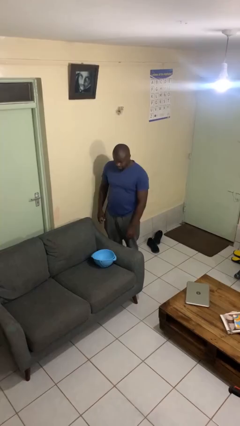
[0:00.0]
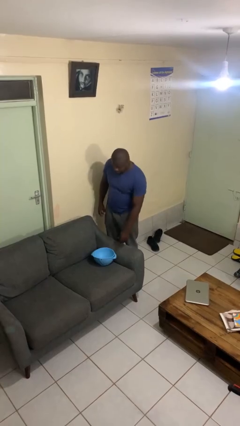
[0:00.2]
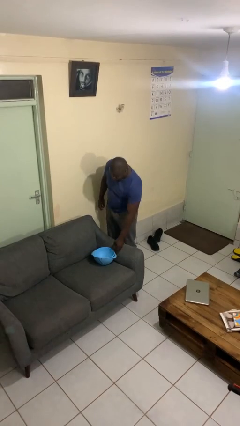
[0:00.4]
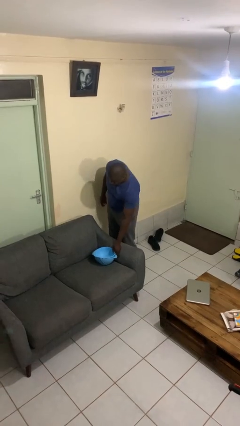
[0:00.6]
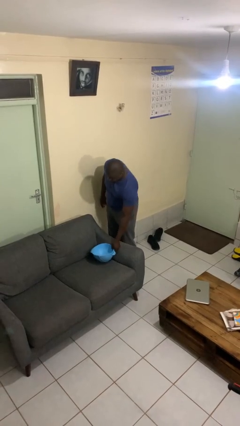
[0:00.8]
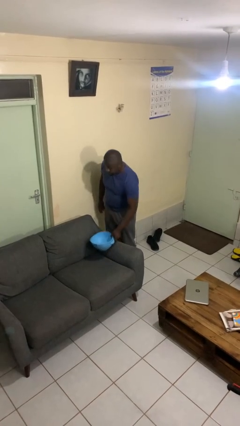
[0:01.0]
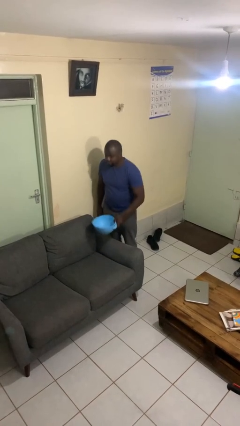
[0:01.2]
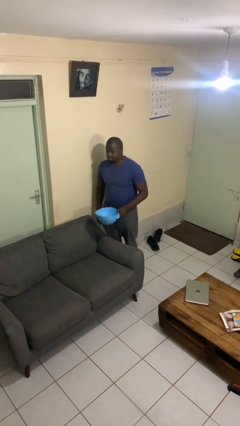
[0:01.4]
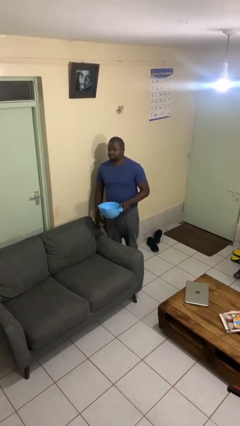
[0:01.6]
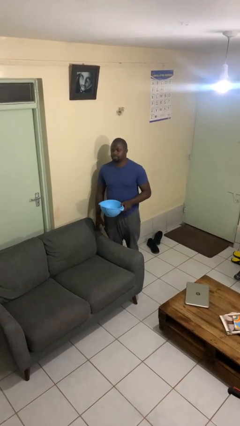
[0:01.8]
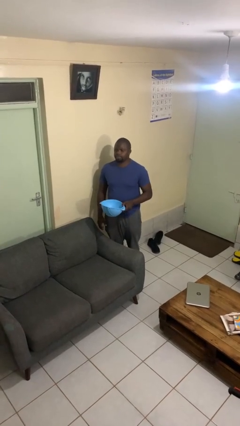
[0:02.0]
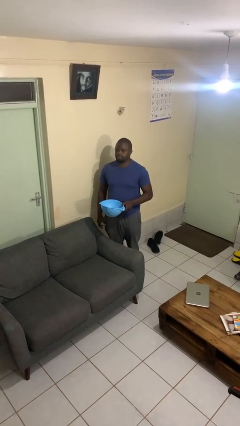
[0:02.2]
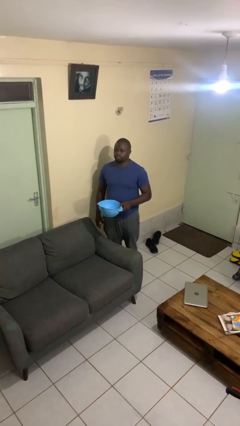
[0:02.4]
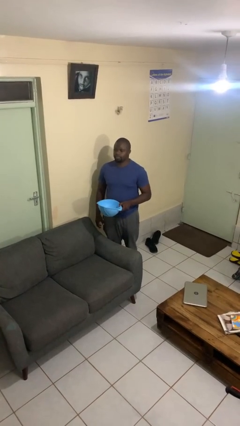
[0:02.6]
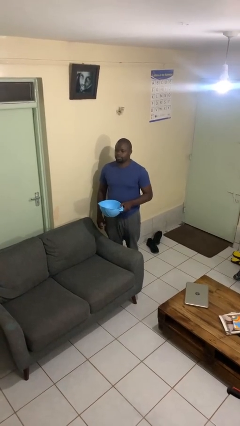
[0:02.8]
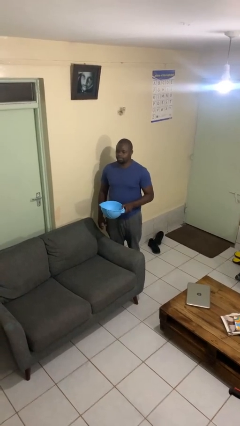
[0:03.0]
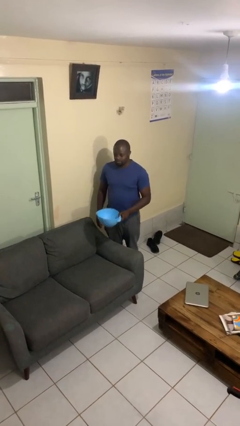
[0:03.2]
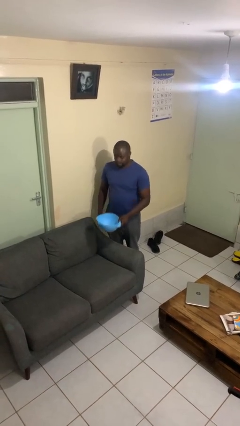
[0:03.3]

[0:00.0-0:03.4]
person picks up object from couch

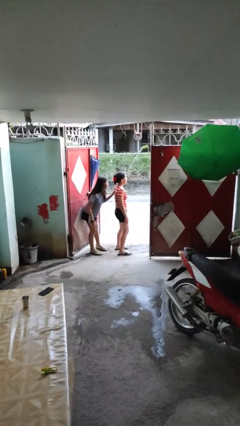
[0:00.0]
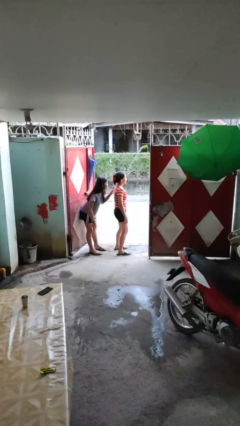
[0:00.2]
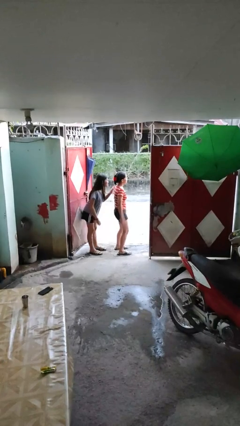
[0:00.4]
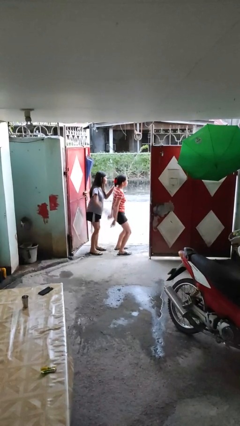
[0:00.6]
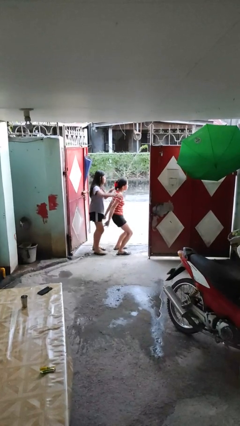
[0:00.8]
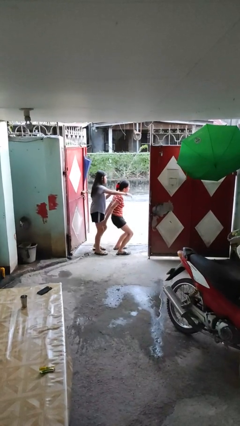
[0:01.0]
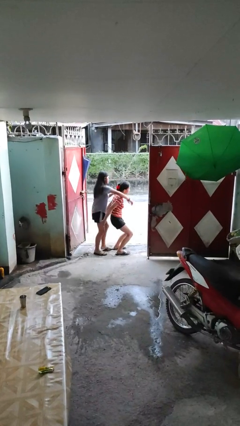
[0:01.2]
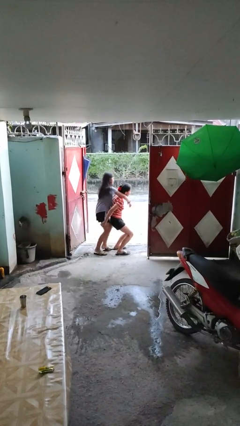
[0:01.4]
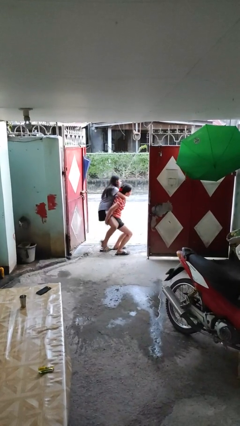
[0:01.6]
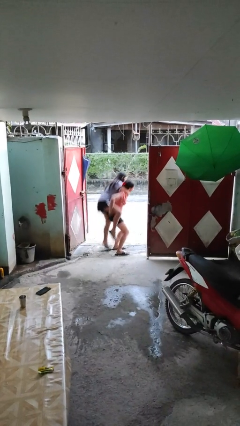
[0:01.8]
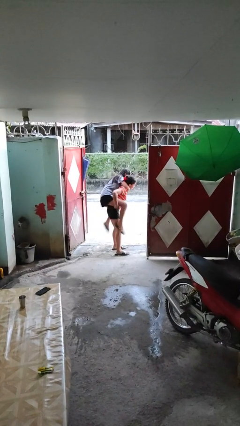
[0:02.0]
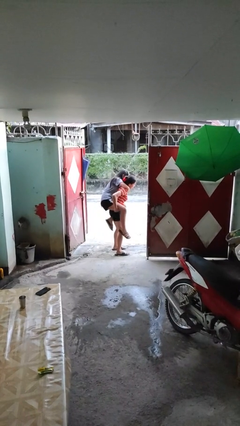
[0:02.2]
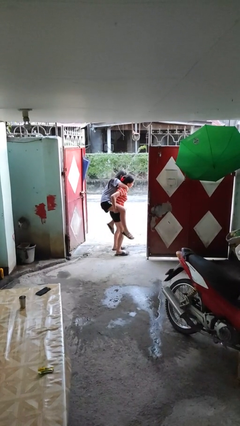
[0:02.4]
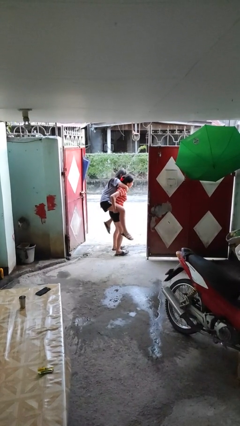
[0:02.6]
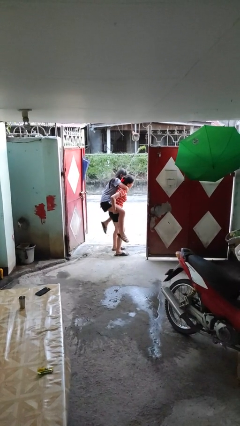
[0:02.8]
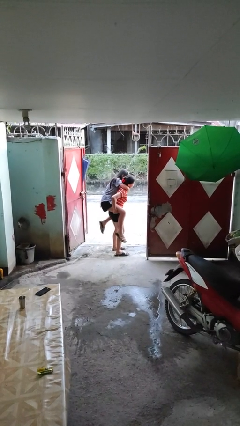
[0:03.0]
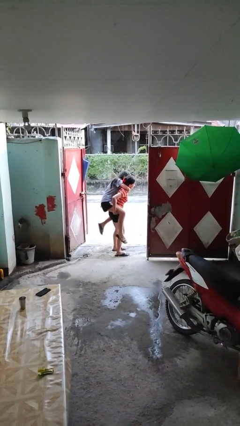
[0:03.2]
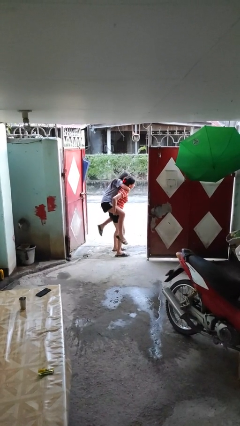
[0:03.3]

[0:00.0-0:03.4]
person carries person over shoulder

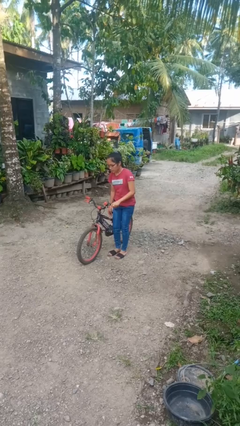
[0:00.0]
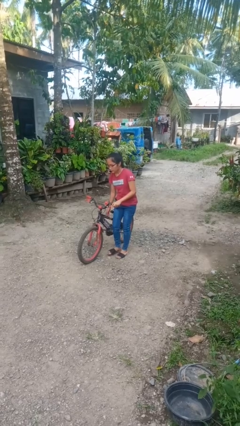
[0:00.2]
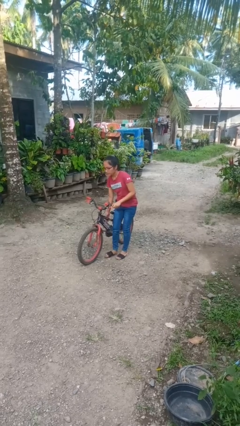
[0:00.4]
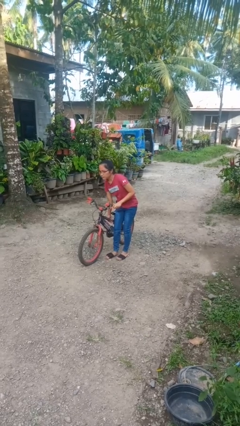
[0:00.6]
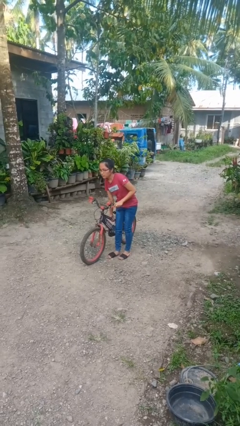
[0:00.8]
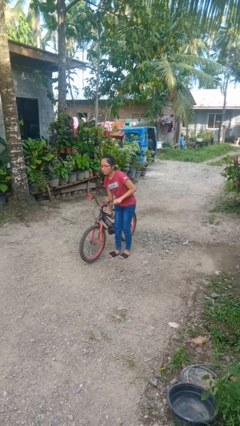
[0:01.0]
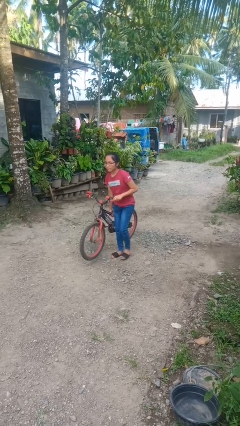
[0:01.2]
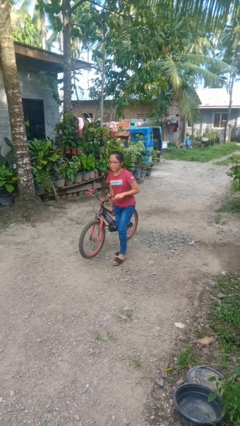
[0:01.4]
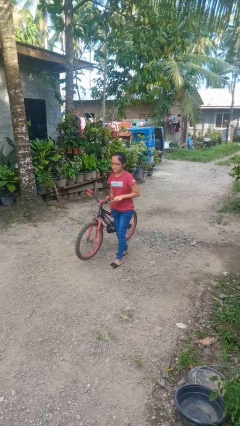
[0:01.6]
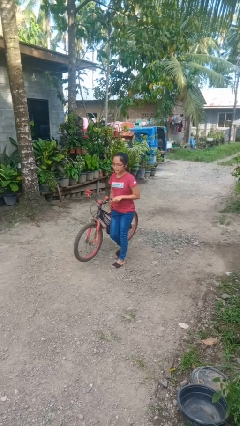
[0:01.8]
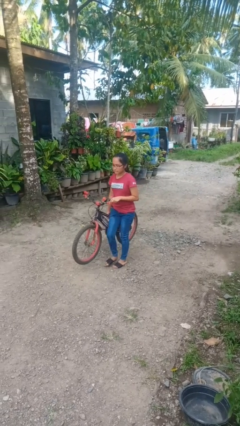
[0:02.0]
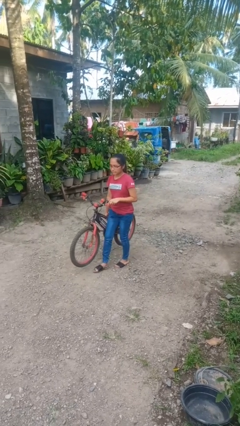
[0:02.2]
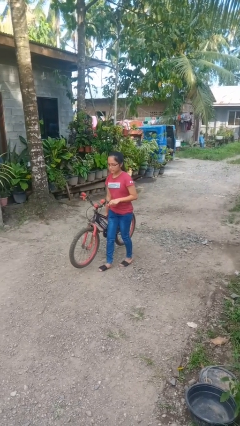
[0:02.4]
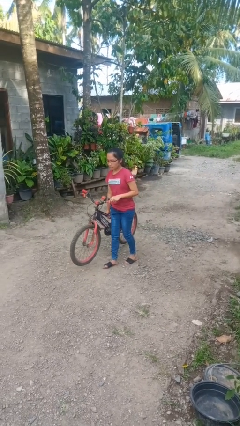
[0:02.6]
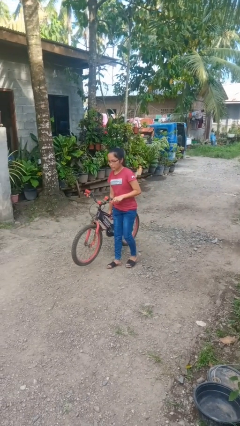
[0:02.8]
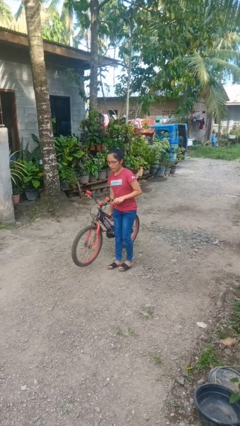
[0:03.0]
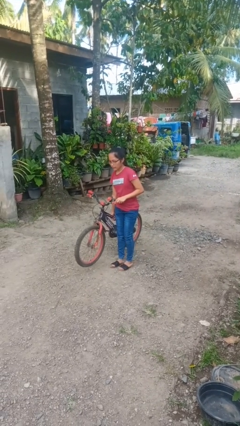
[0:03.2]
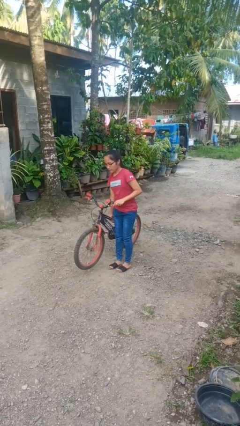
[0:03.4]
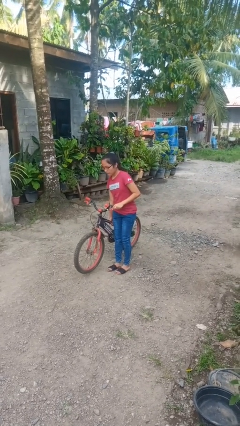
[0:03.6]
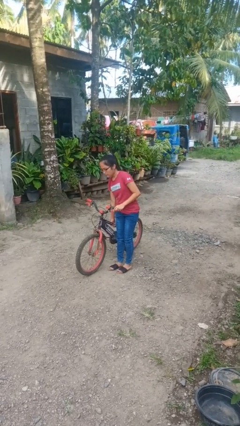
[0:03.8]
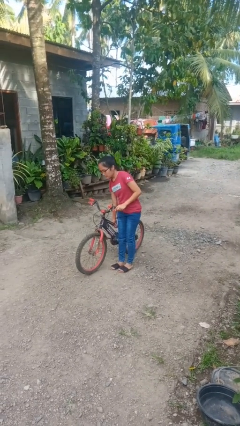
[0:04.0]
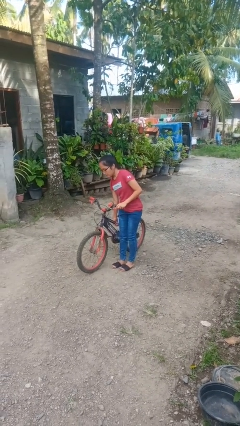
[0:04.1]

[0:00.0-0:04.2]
person carries bicycle

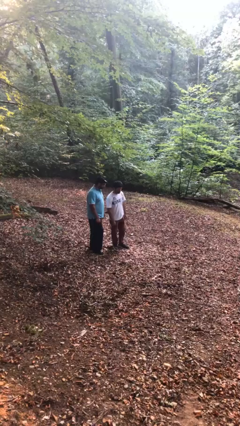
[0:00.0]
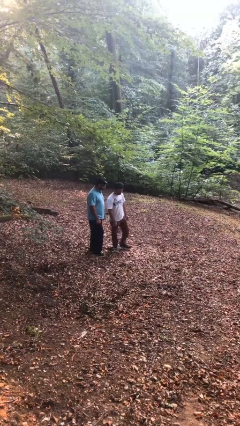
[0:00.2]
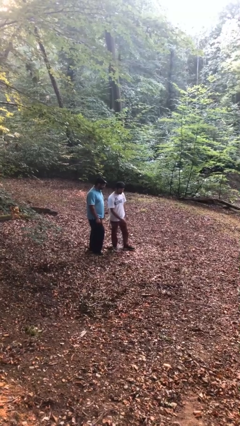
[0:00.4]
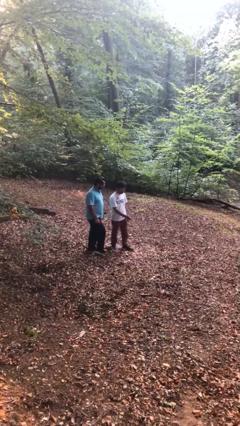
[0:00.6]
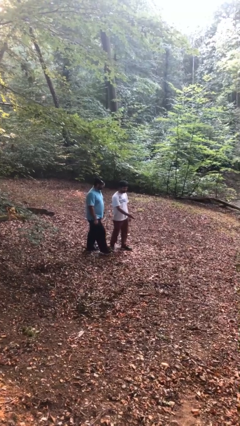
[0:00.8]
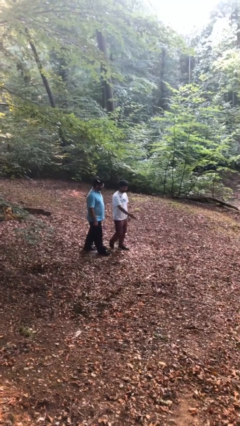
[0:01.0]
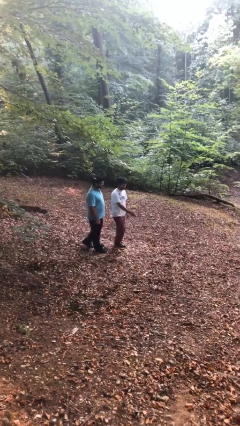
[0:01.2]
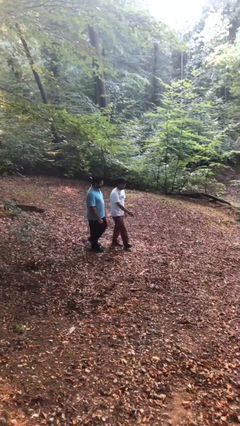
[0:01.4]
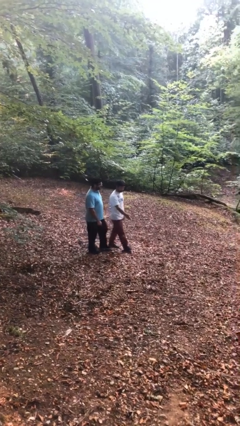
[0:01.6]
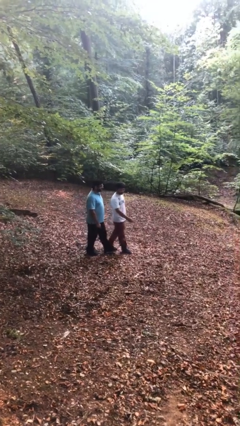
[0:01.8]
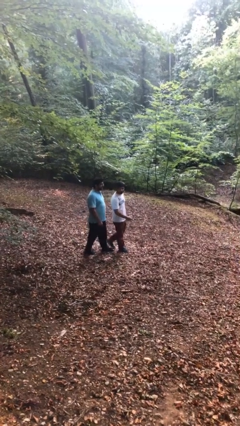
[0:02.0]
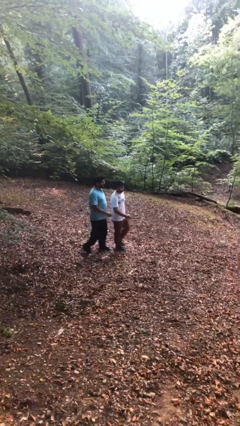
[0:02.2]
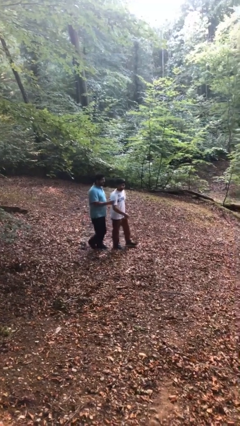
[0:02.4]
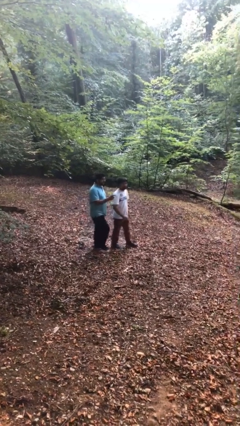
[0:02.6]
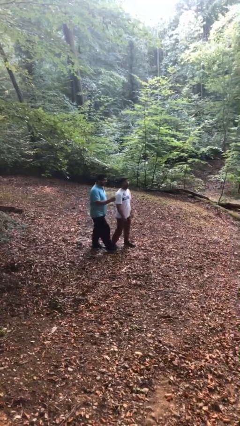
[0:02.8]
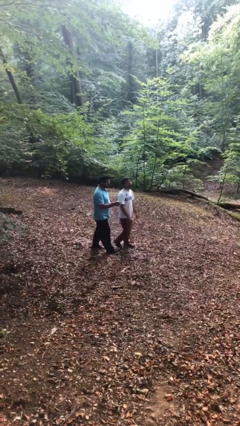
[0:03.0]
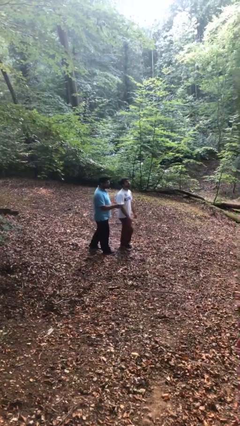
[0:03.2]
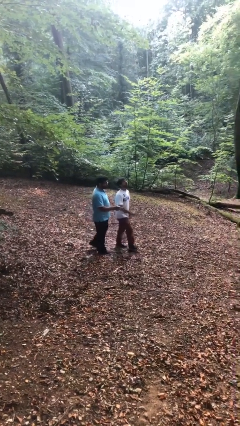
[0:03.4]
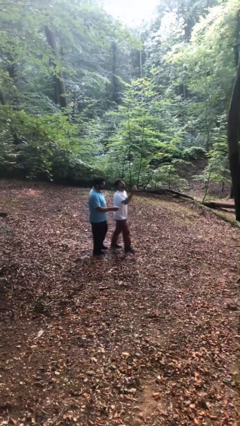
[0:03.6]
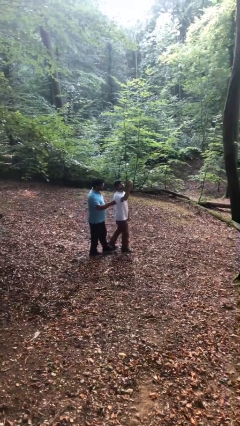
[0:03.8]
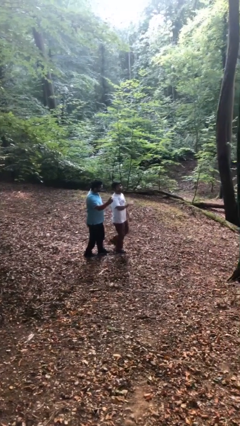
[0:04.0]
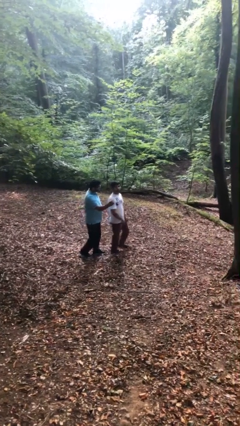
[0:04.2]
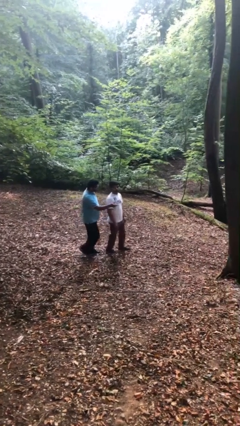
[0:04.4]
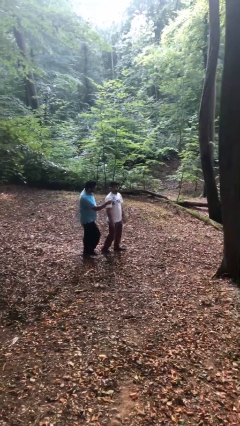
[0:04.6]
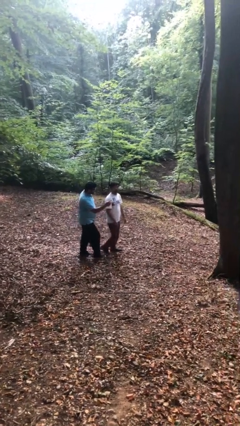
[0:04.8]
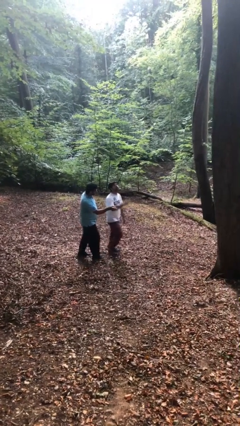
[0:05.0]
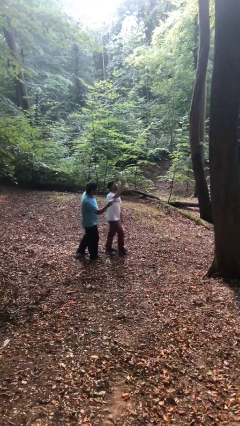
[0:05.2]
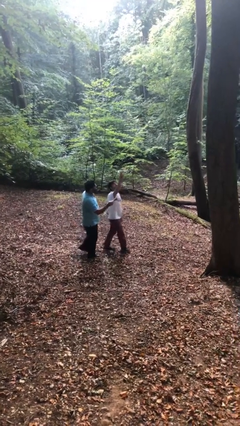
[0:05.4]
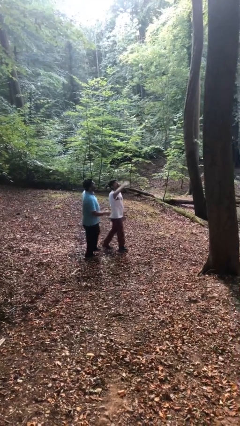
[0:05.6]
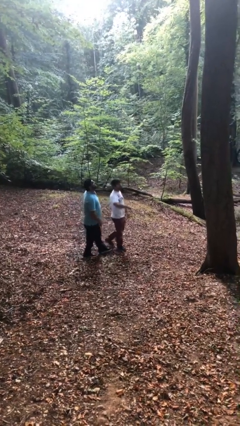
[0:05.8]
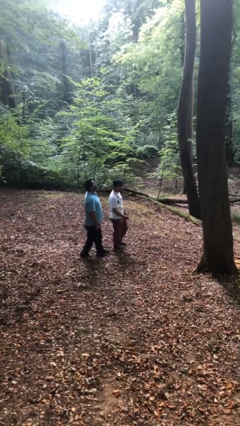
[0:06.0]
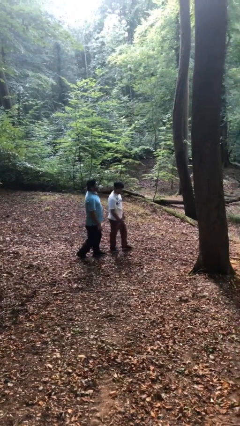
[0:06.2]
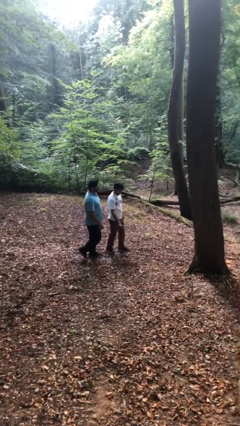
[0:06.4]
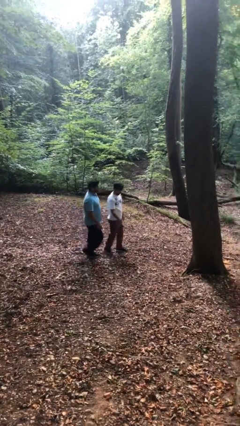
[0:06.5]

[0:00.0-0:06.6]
person talks to person

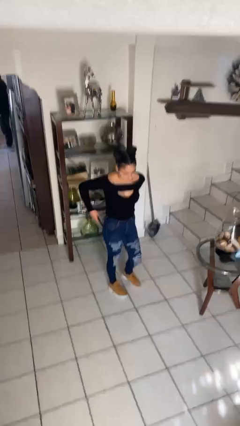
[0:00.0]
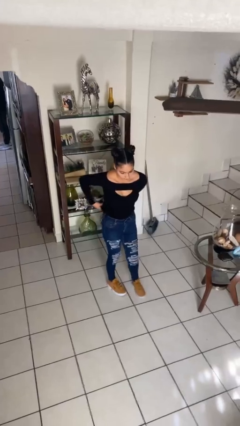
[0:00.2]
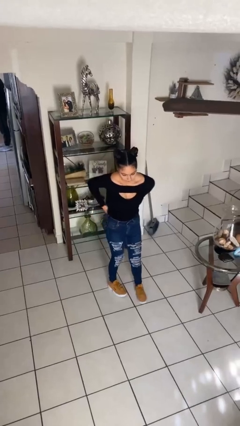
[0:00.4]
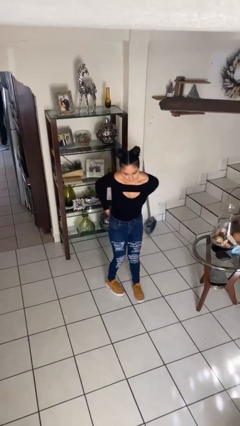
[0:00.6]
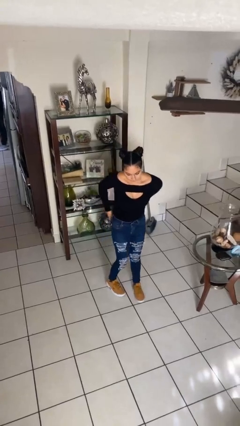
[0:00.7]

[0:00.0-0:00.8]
person puts phone into pocket
